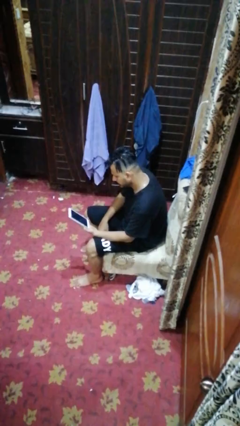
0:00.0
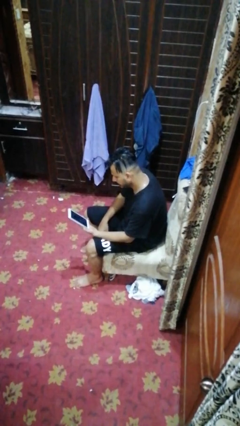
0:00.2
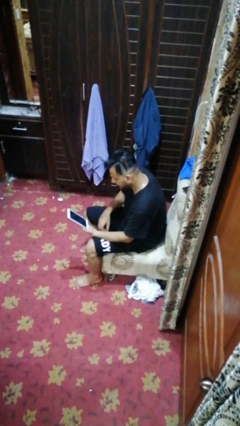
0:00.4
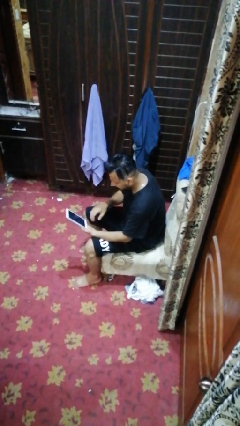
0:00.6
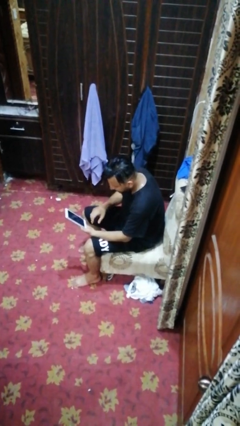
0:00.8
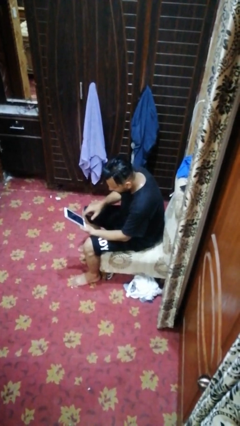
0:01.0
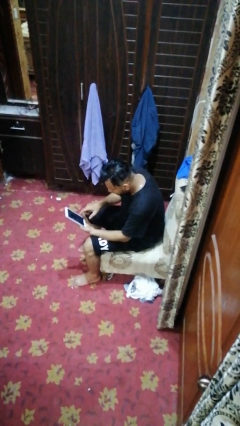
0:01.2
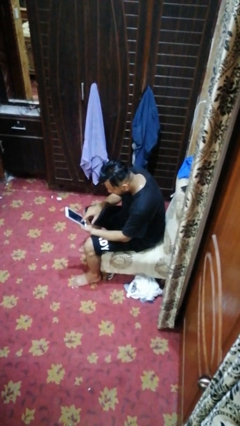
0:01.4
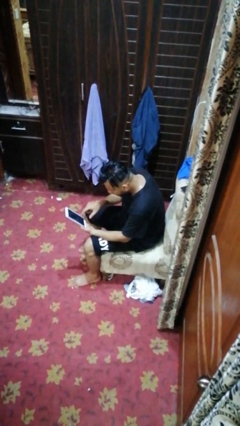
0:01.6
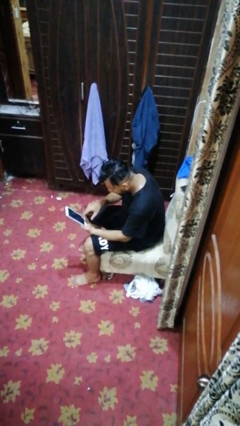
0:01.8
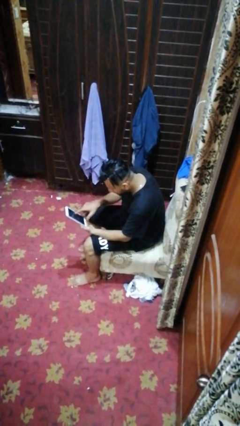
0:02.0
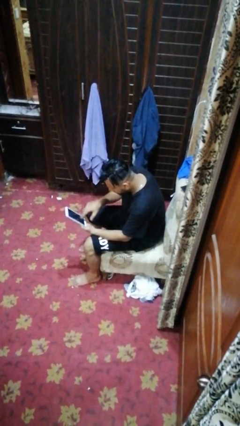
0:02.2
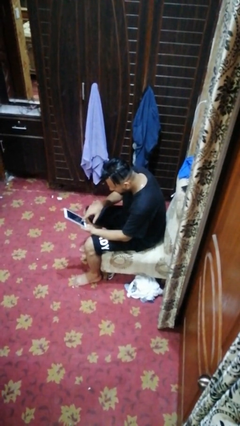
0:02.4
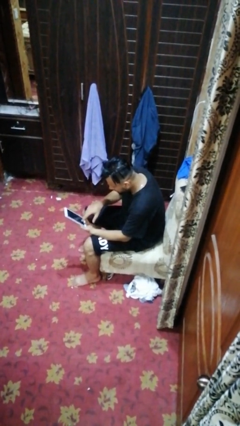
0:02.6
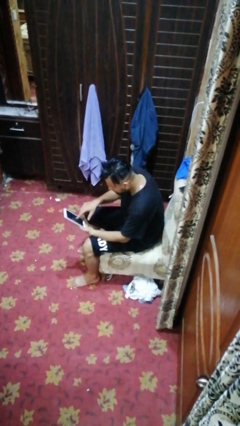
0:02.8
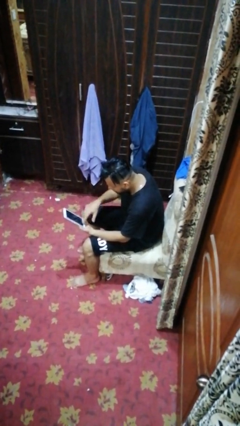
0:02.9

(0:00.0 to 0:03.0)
person interacts with tablet

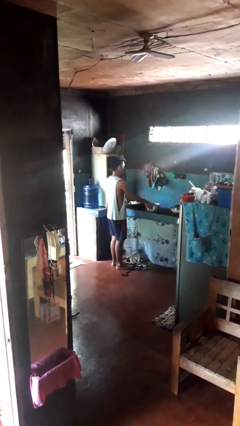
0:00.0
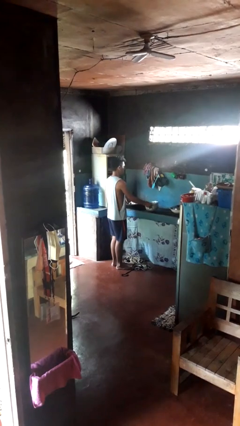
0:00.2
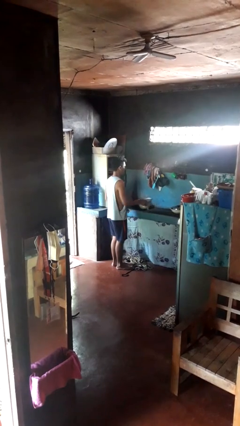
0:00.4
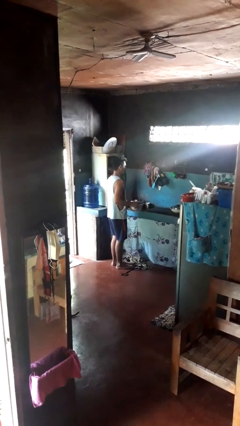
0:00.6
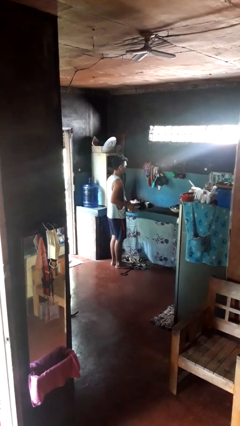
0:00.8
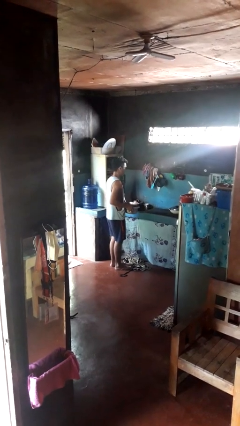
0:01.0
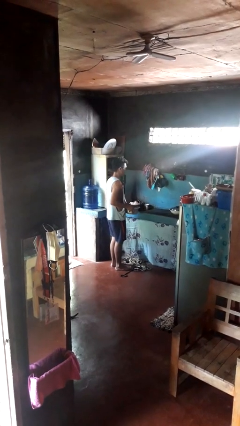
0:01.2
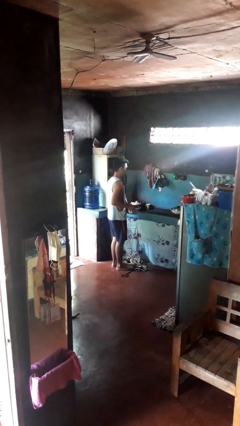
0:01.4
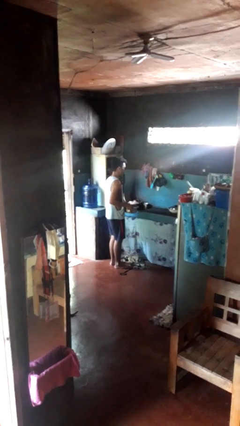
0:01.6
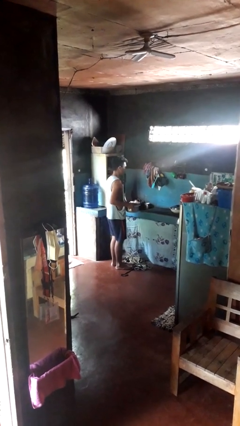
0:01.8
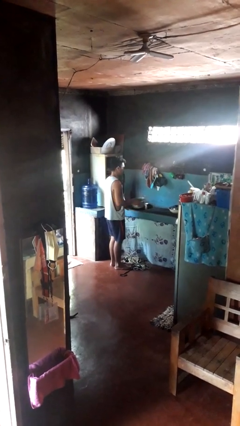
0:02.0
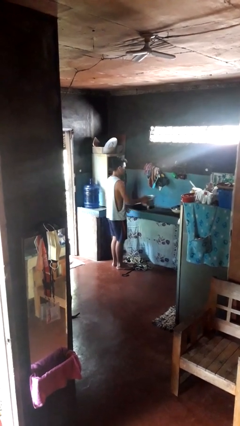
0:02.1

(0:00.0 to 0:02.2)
person picks up object from countertop

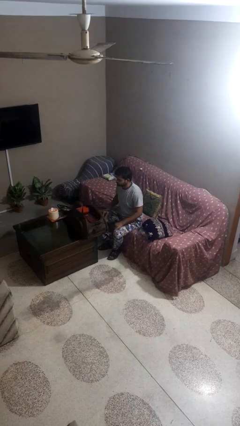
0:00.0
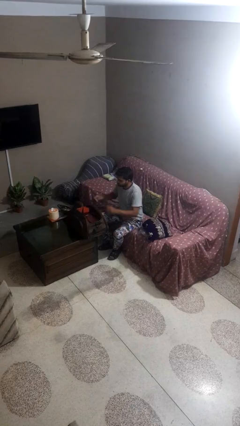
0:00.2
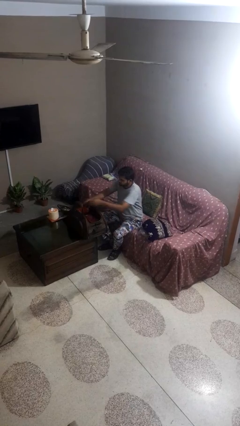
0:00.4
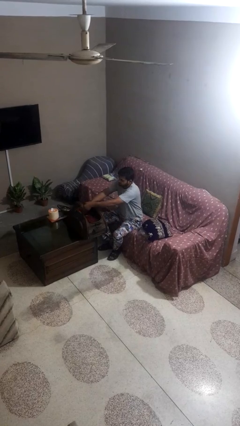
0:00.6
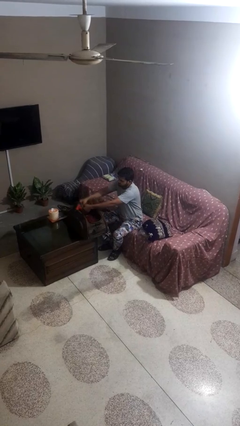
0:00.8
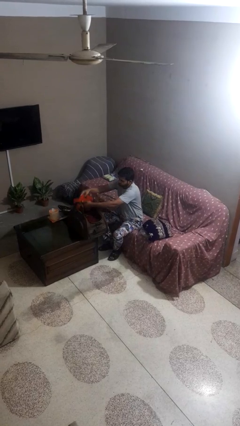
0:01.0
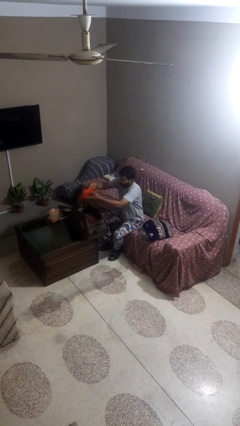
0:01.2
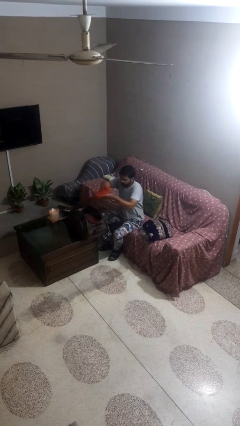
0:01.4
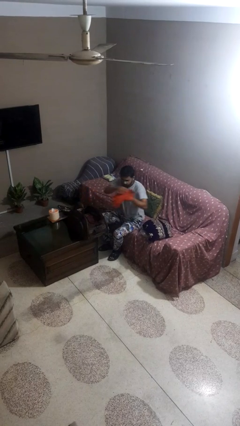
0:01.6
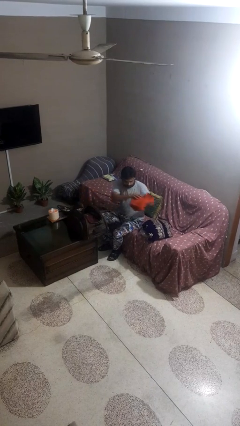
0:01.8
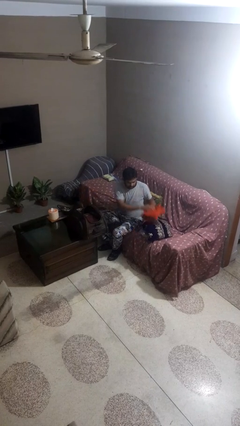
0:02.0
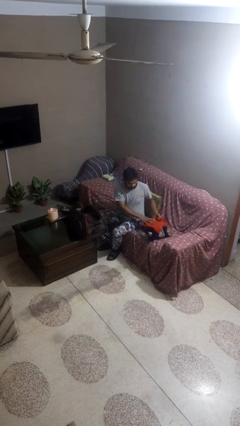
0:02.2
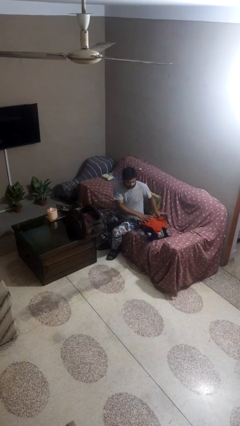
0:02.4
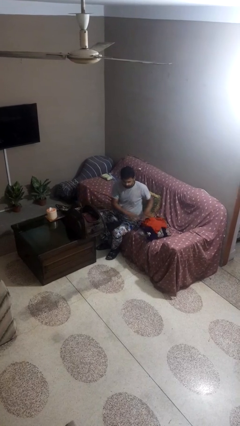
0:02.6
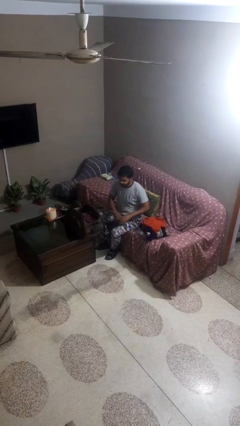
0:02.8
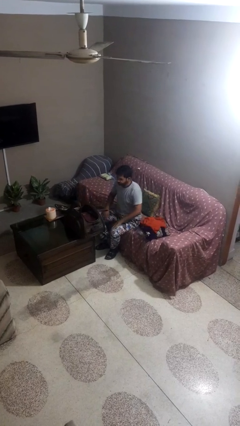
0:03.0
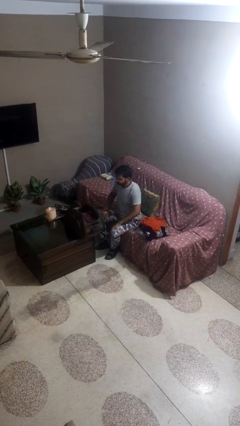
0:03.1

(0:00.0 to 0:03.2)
person unloads clothes from suitcase

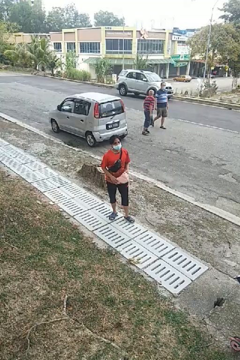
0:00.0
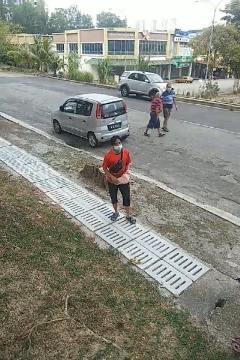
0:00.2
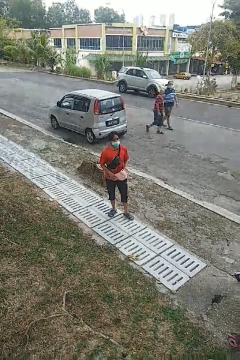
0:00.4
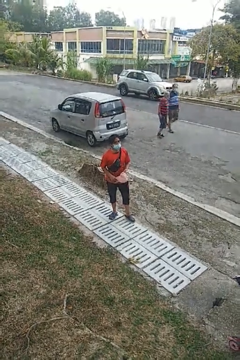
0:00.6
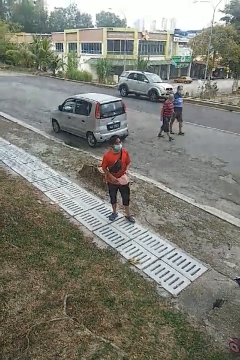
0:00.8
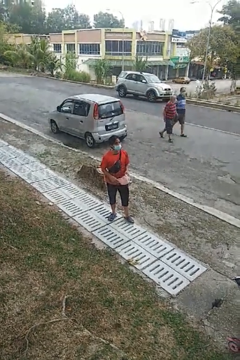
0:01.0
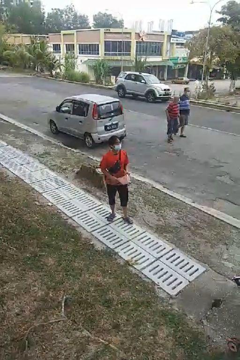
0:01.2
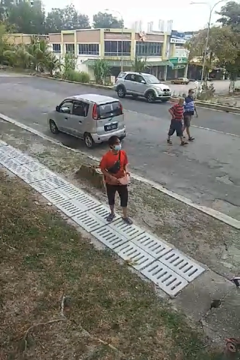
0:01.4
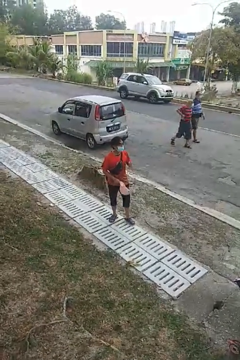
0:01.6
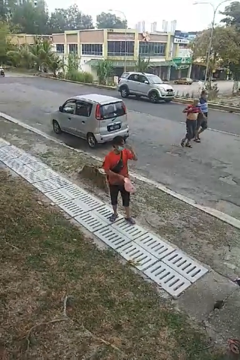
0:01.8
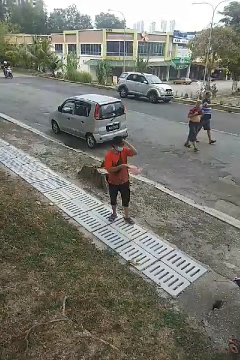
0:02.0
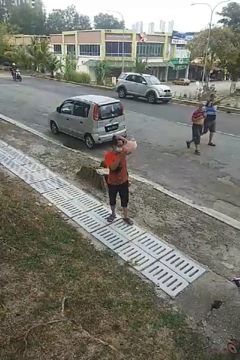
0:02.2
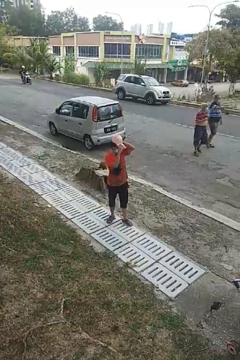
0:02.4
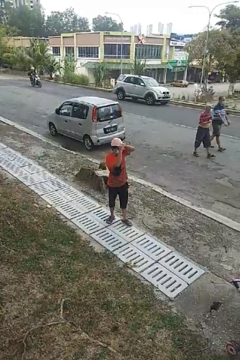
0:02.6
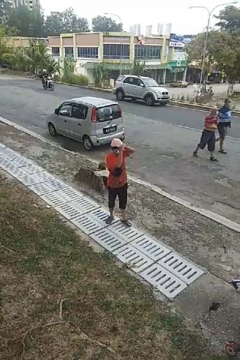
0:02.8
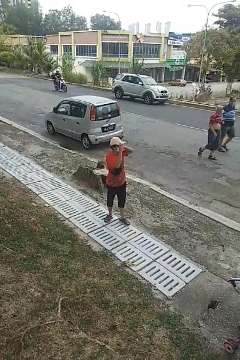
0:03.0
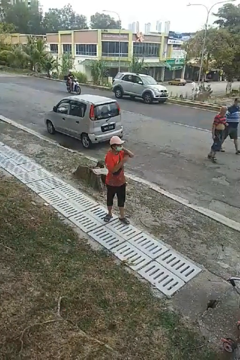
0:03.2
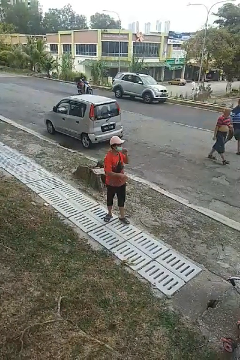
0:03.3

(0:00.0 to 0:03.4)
person puts on hat

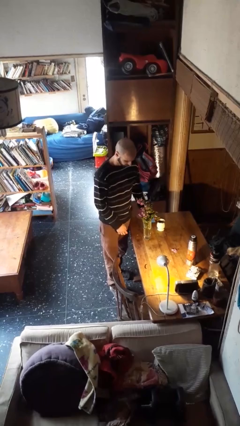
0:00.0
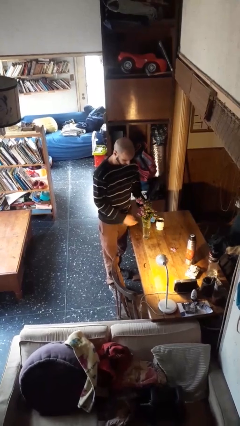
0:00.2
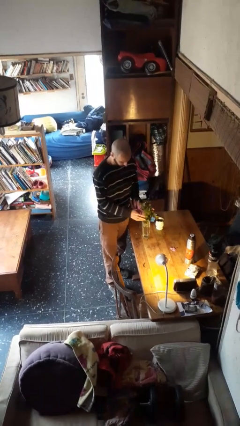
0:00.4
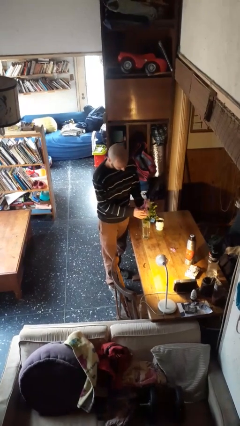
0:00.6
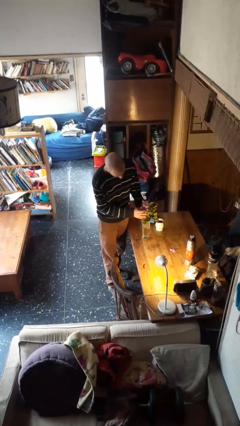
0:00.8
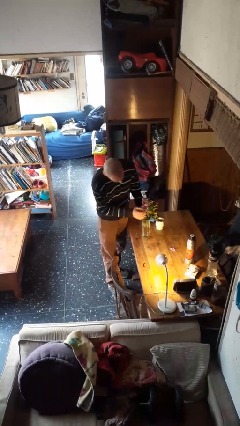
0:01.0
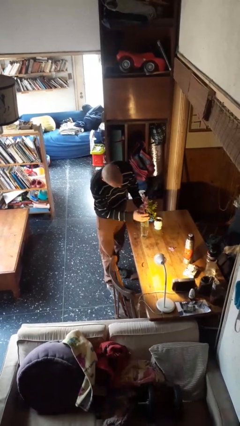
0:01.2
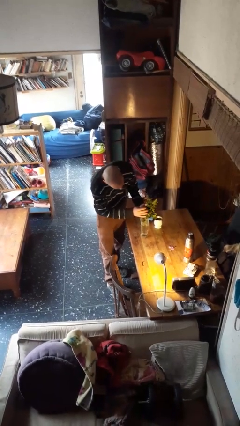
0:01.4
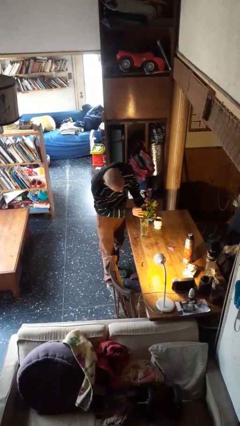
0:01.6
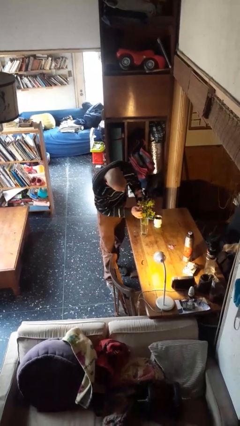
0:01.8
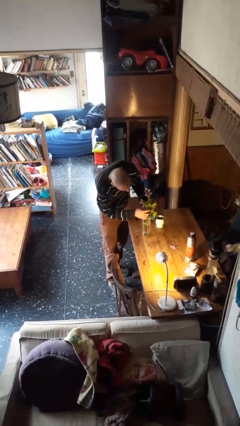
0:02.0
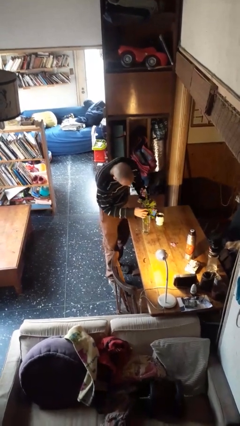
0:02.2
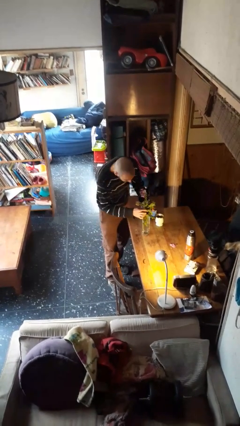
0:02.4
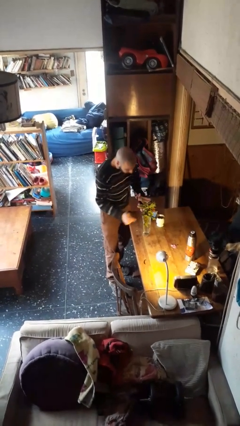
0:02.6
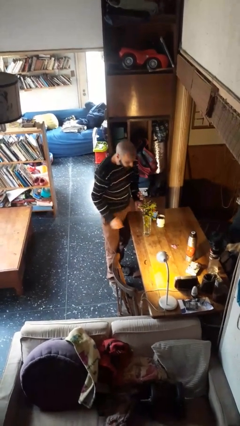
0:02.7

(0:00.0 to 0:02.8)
person arranges flowers in vase

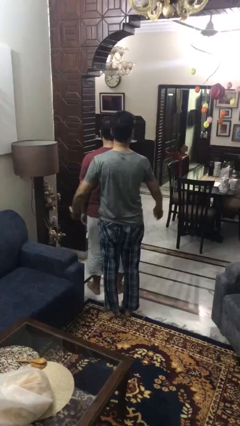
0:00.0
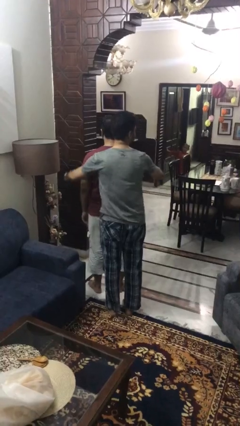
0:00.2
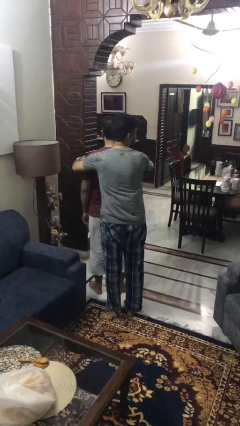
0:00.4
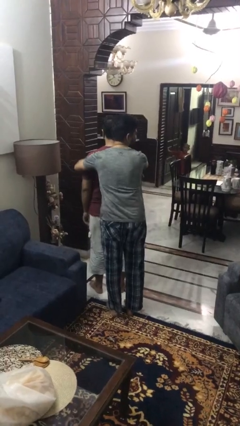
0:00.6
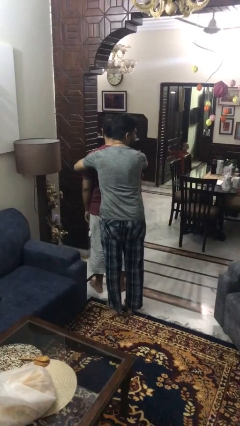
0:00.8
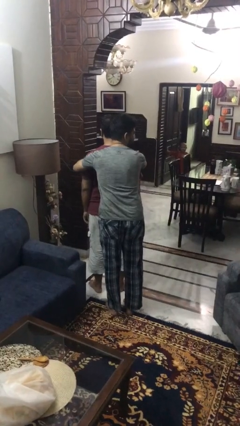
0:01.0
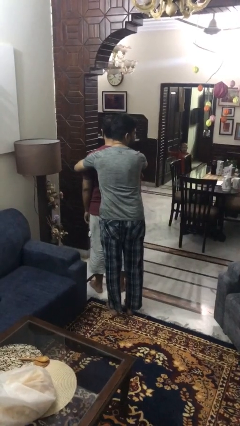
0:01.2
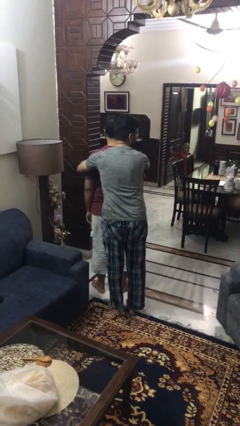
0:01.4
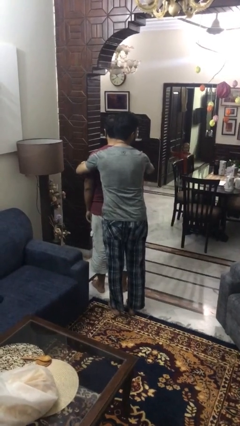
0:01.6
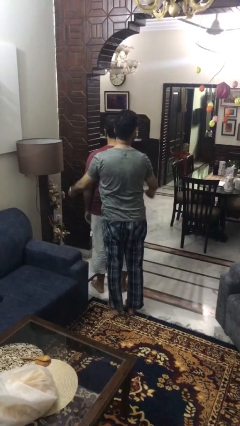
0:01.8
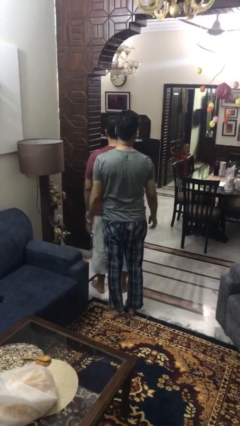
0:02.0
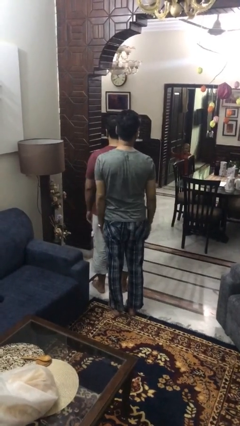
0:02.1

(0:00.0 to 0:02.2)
person hugs person from behind

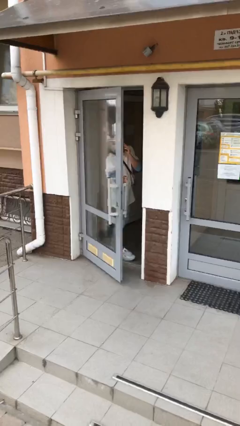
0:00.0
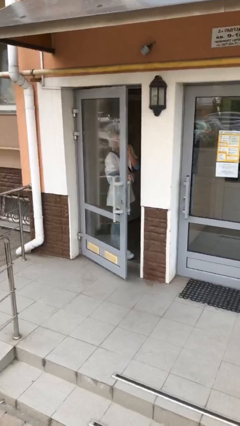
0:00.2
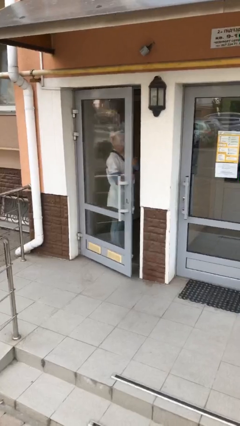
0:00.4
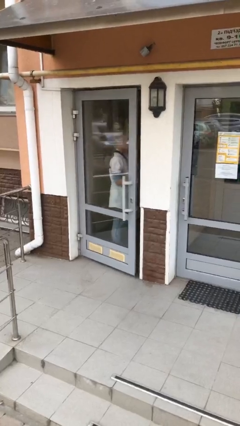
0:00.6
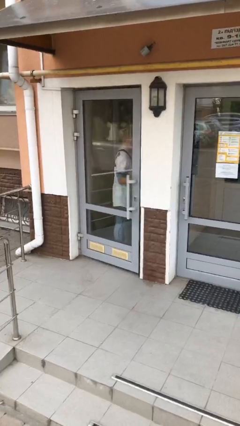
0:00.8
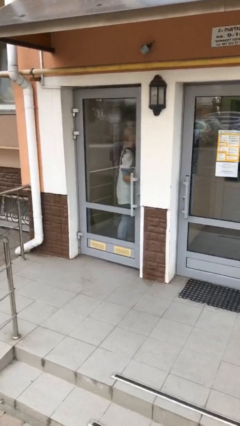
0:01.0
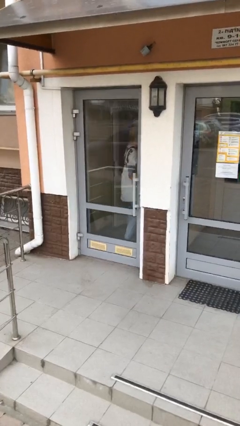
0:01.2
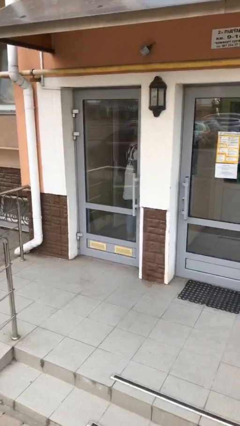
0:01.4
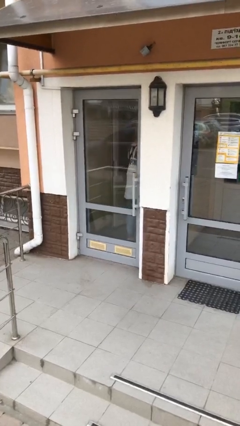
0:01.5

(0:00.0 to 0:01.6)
person closes facility door
